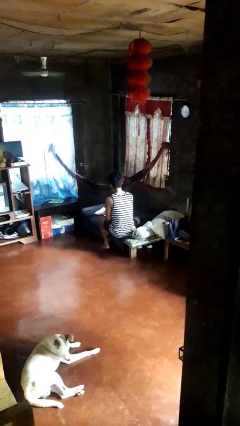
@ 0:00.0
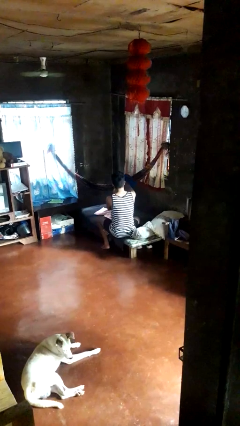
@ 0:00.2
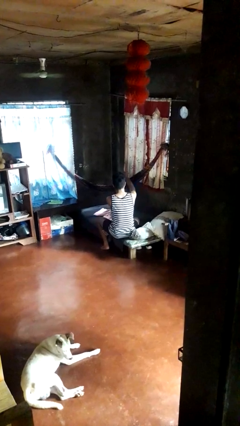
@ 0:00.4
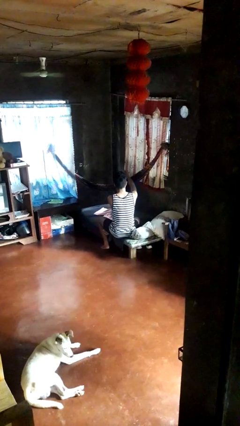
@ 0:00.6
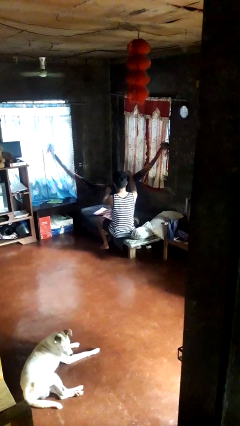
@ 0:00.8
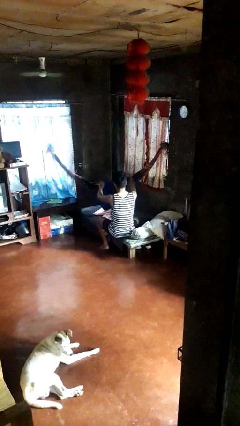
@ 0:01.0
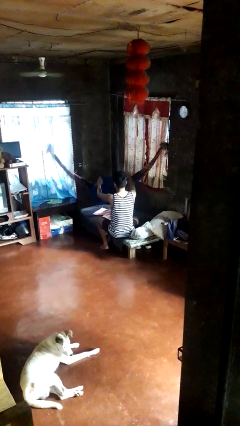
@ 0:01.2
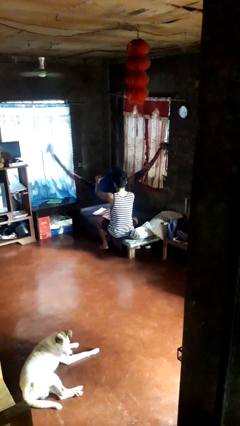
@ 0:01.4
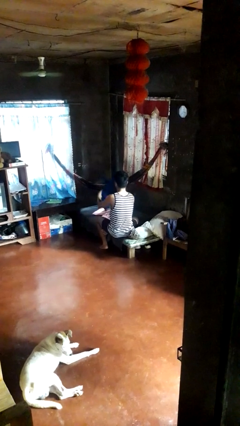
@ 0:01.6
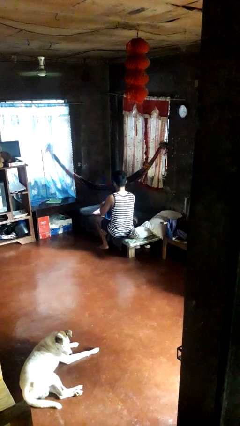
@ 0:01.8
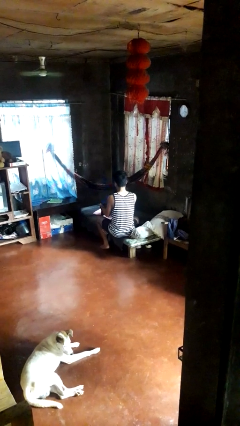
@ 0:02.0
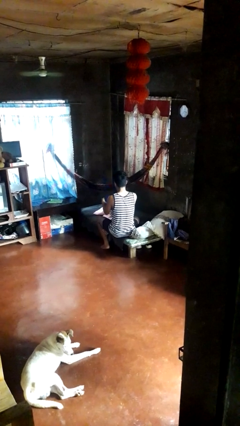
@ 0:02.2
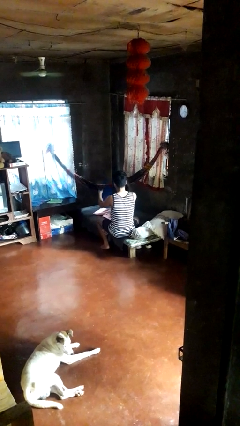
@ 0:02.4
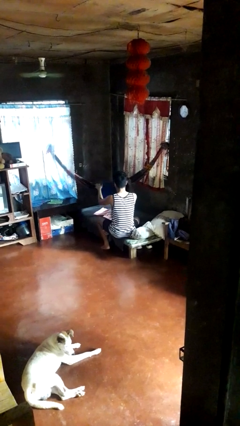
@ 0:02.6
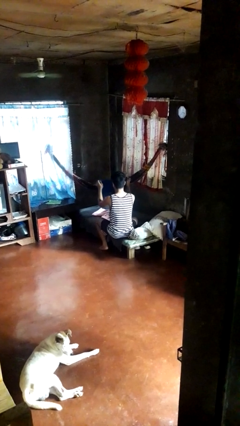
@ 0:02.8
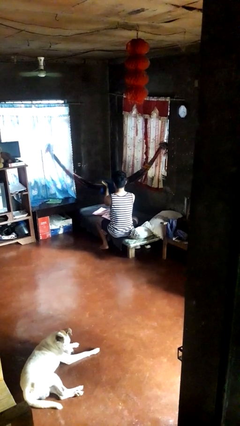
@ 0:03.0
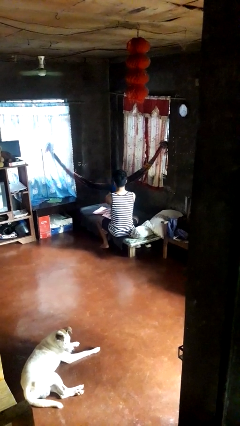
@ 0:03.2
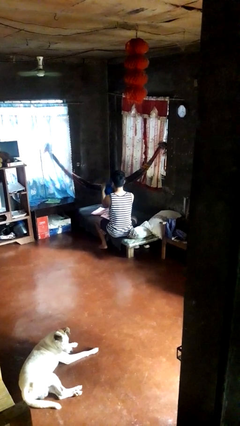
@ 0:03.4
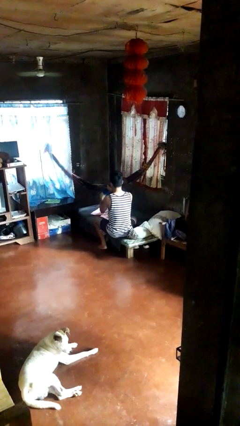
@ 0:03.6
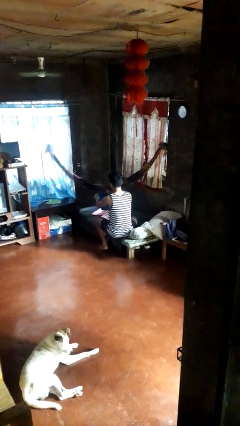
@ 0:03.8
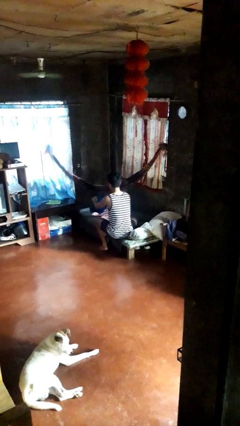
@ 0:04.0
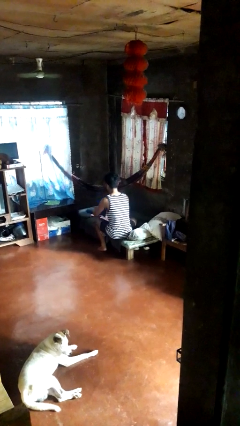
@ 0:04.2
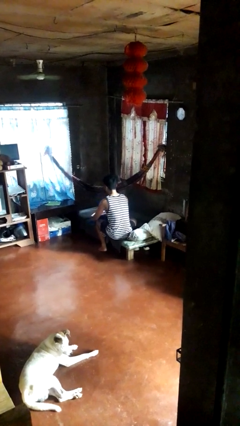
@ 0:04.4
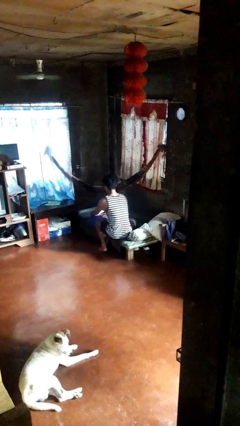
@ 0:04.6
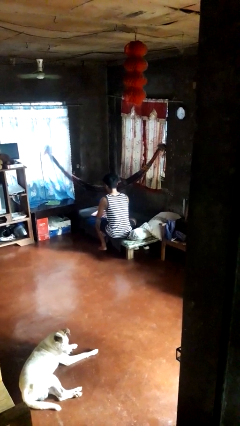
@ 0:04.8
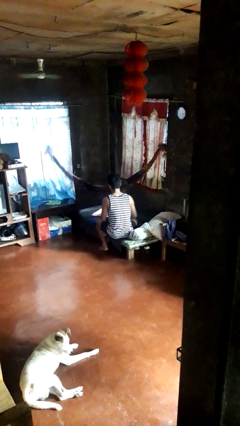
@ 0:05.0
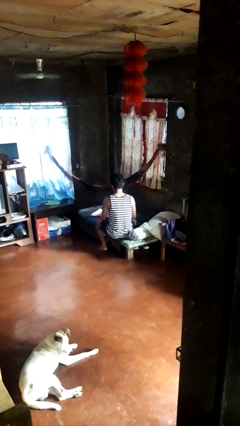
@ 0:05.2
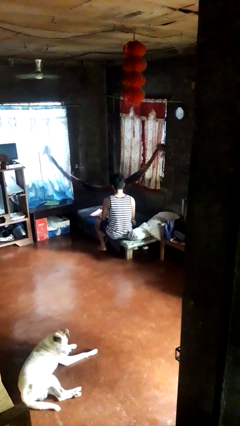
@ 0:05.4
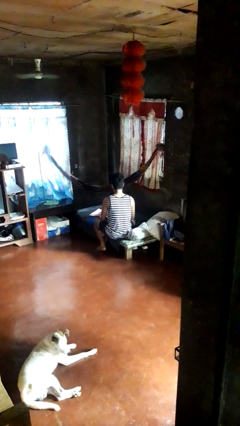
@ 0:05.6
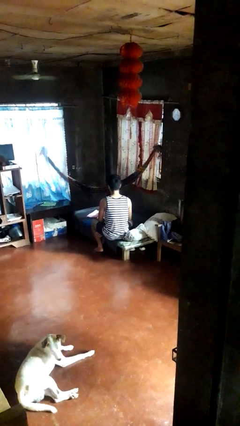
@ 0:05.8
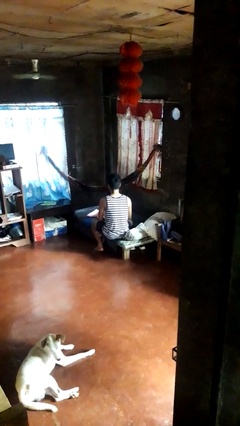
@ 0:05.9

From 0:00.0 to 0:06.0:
person folds shirt

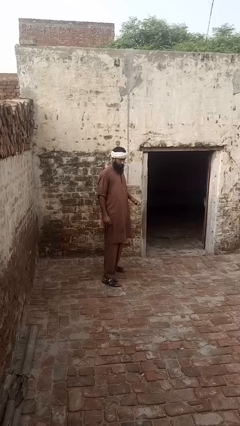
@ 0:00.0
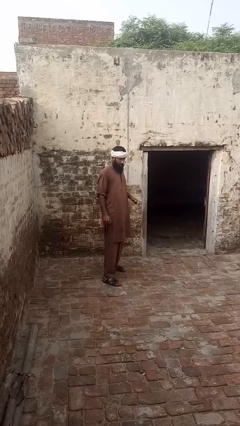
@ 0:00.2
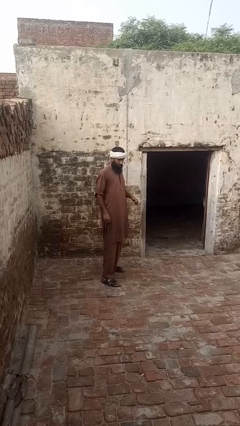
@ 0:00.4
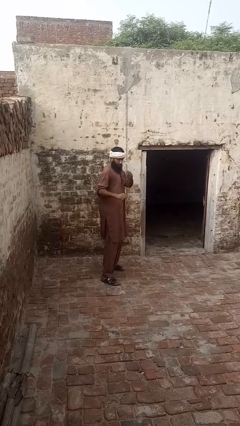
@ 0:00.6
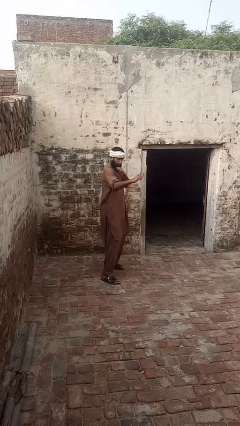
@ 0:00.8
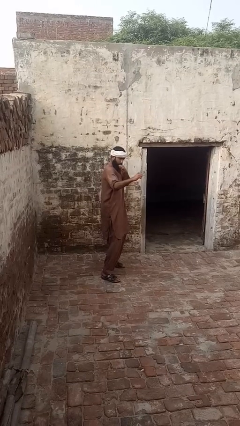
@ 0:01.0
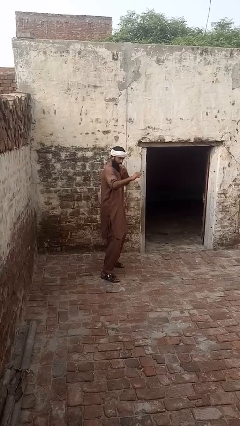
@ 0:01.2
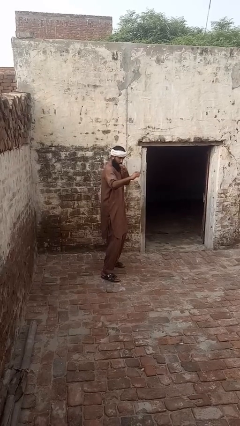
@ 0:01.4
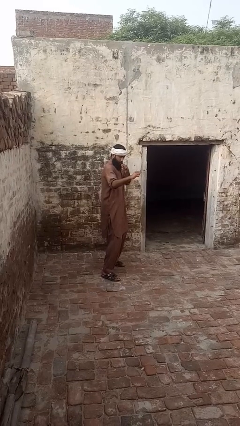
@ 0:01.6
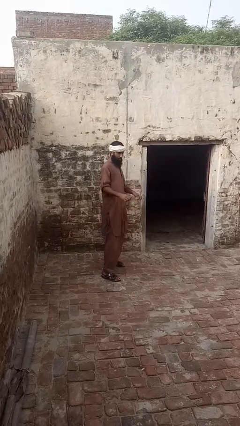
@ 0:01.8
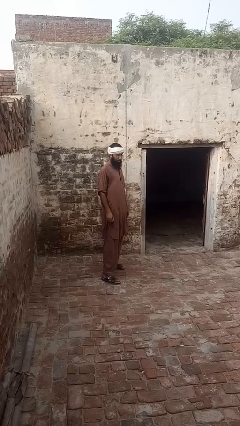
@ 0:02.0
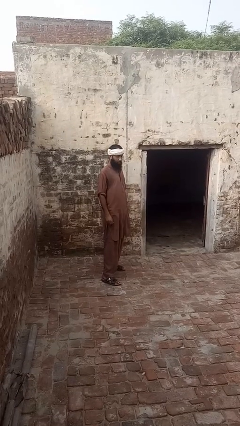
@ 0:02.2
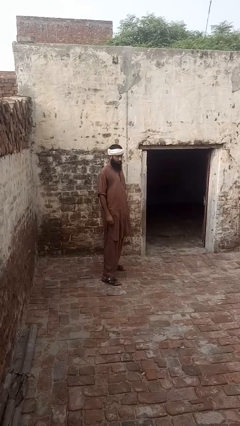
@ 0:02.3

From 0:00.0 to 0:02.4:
person karate chop

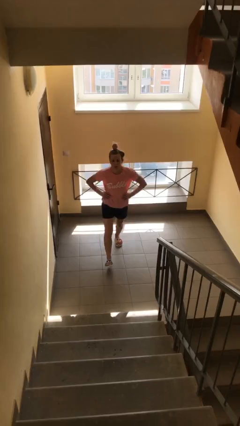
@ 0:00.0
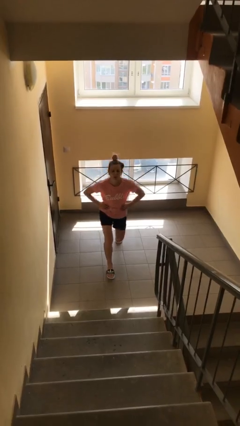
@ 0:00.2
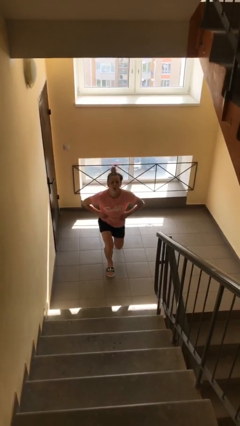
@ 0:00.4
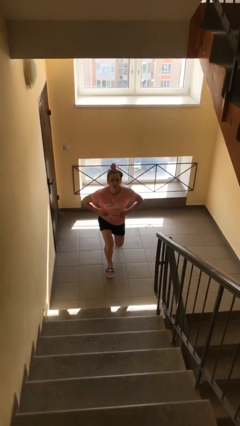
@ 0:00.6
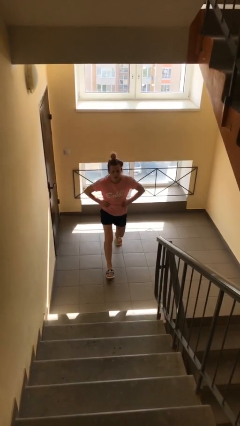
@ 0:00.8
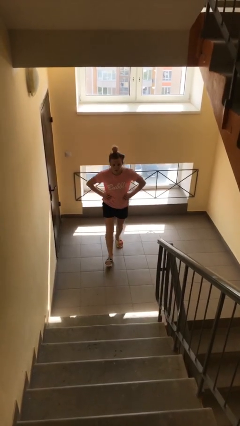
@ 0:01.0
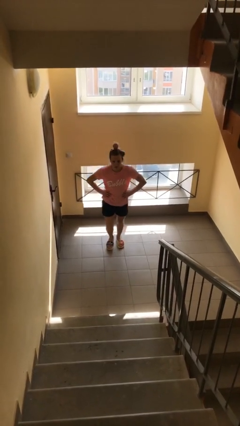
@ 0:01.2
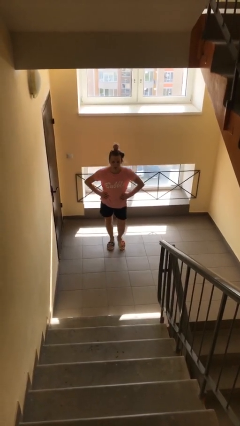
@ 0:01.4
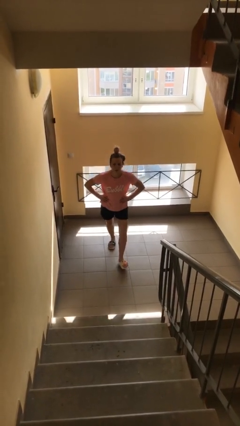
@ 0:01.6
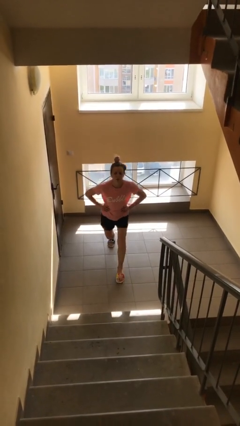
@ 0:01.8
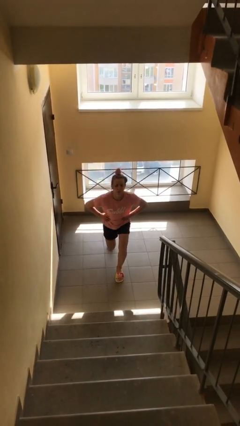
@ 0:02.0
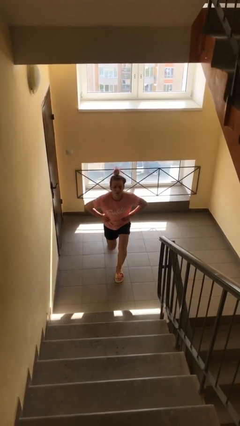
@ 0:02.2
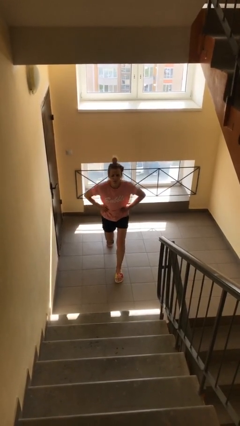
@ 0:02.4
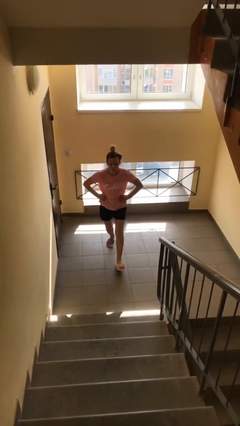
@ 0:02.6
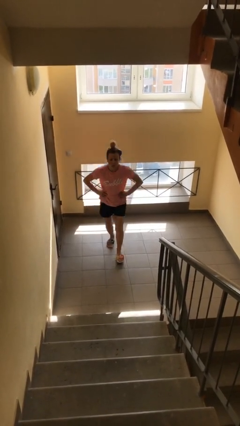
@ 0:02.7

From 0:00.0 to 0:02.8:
person exercises with lunges

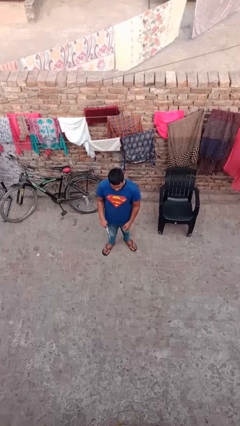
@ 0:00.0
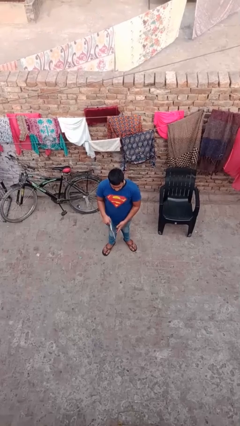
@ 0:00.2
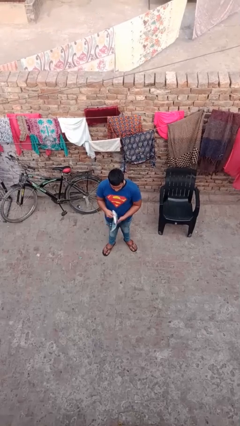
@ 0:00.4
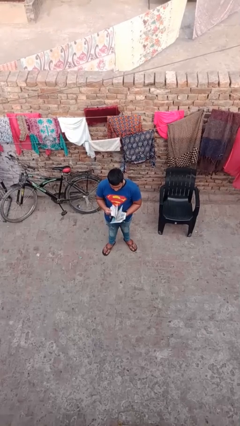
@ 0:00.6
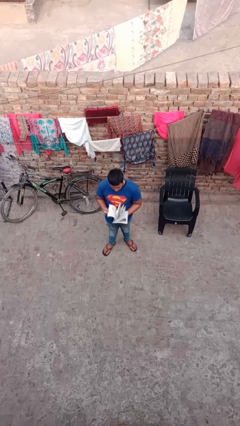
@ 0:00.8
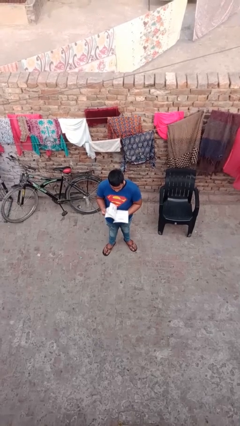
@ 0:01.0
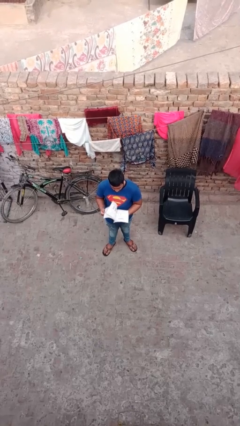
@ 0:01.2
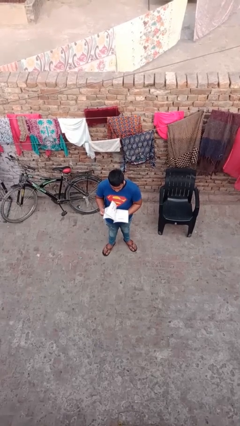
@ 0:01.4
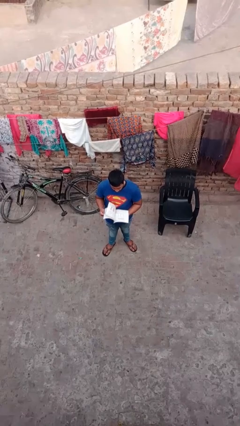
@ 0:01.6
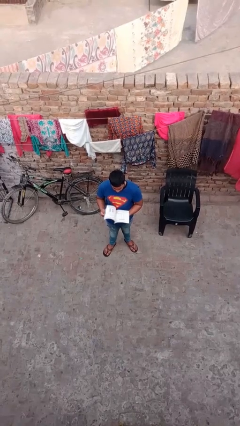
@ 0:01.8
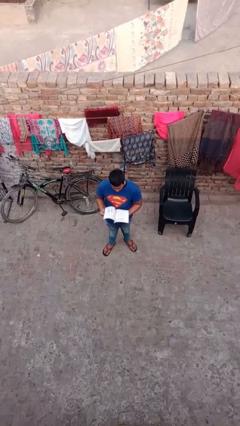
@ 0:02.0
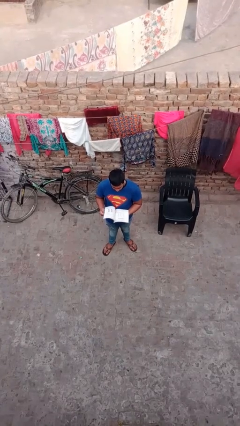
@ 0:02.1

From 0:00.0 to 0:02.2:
person reads document

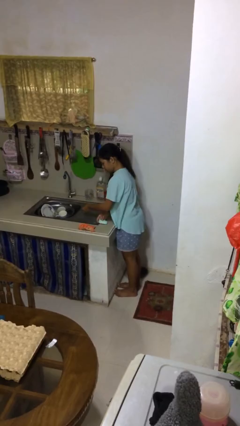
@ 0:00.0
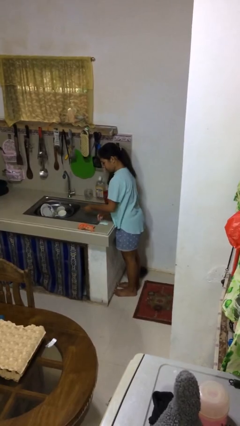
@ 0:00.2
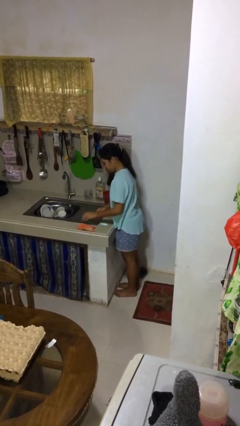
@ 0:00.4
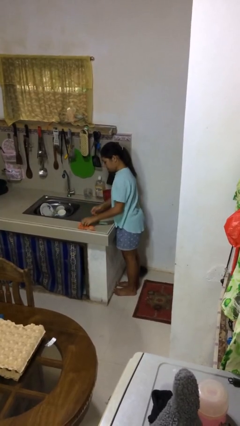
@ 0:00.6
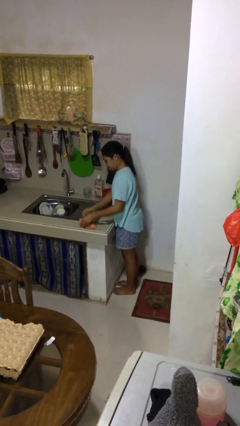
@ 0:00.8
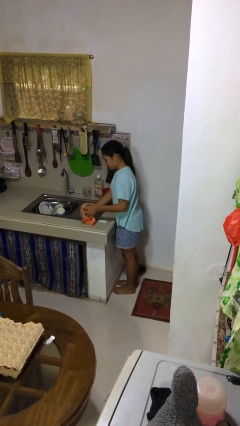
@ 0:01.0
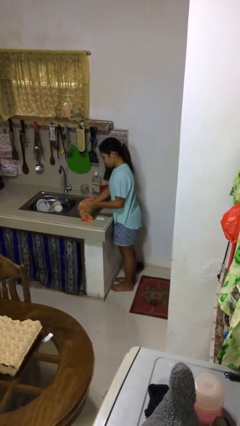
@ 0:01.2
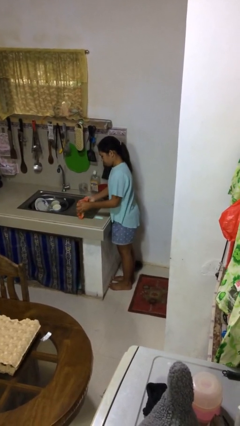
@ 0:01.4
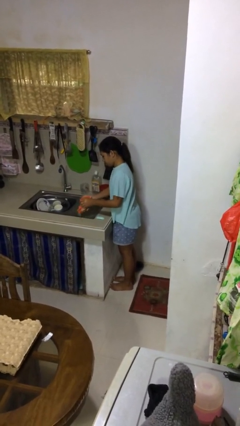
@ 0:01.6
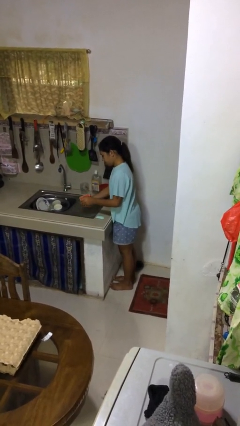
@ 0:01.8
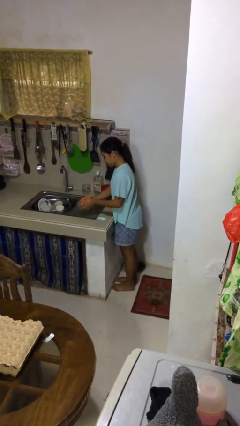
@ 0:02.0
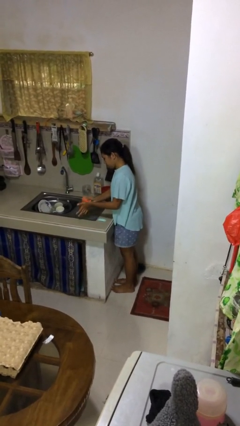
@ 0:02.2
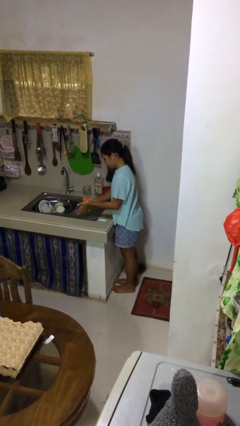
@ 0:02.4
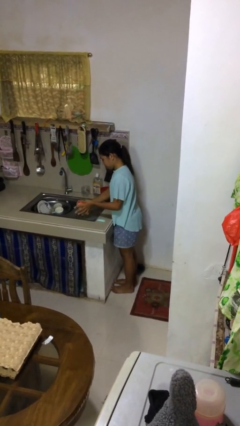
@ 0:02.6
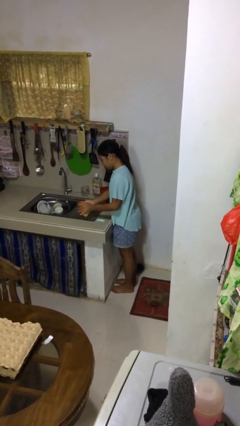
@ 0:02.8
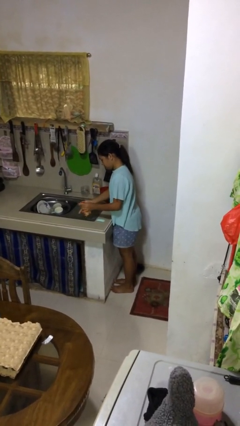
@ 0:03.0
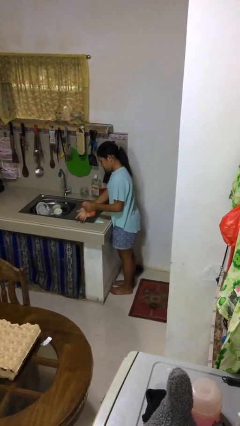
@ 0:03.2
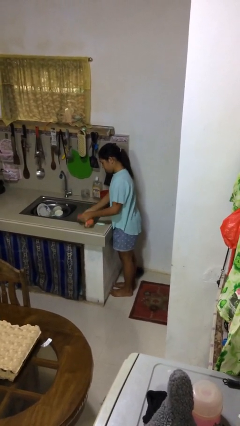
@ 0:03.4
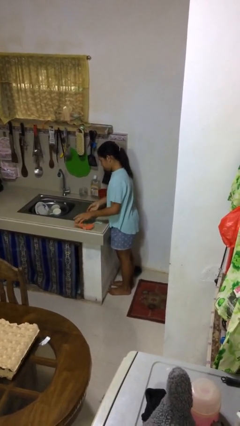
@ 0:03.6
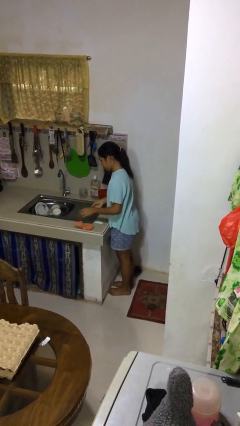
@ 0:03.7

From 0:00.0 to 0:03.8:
person dries hands with towel

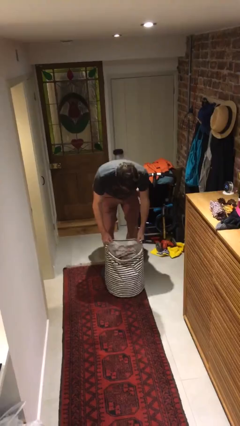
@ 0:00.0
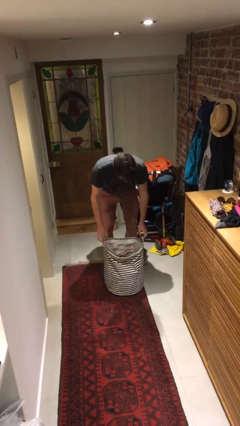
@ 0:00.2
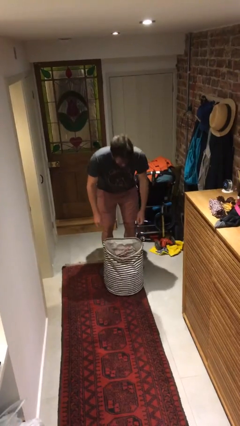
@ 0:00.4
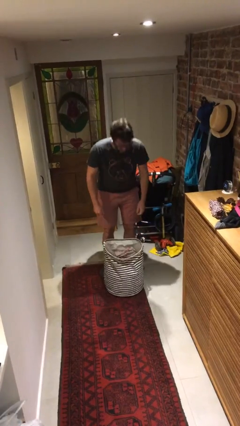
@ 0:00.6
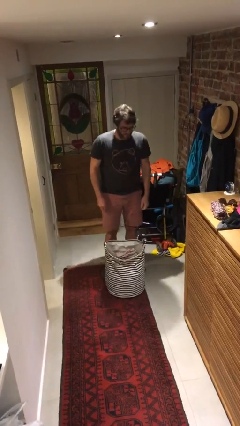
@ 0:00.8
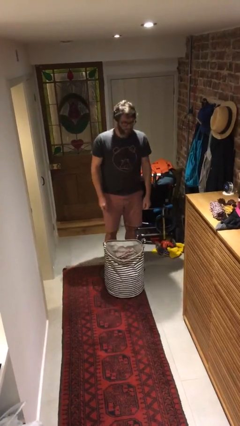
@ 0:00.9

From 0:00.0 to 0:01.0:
person puts down object on floor
